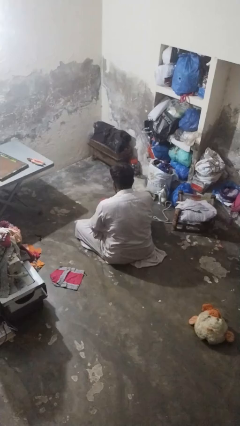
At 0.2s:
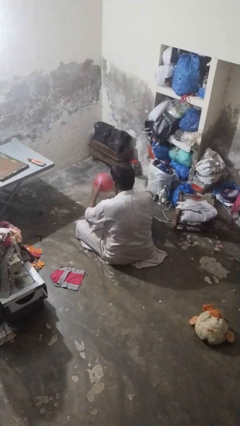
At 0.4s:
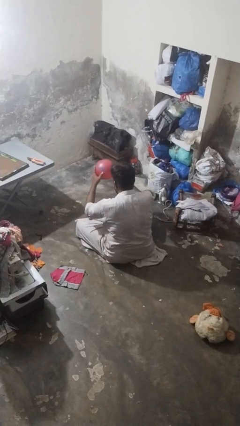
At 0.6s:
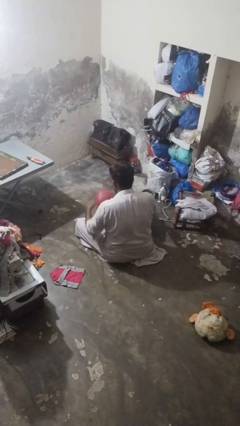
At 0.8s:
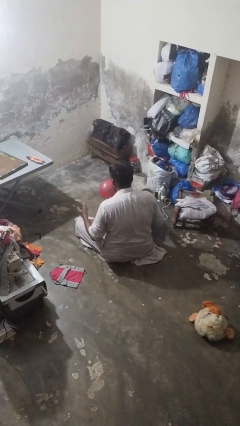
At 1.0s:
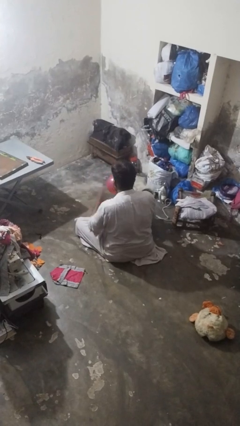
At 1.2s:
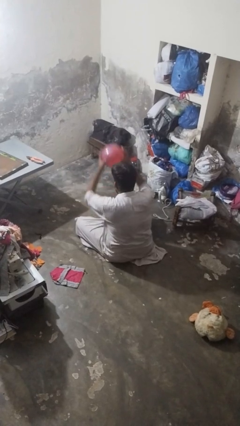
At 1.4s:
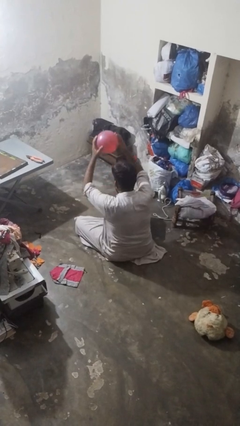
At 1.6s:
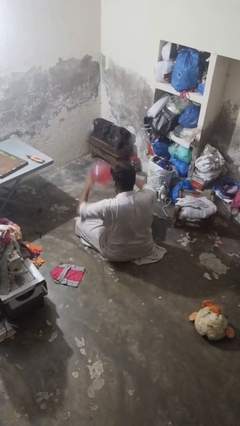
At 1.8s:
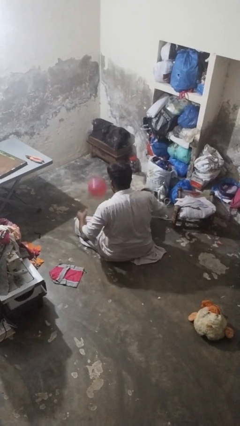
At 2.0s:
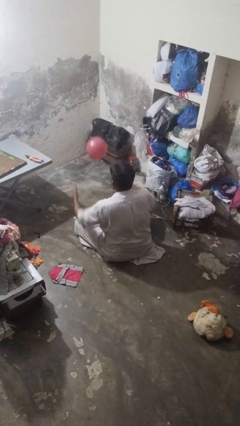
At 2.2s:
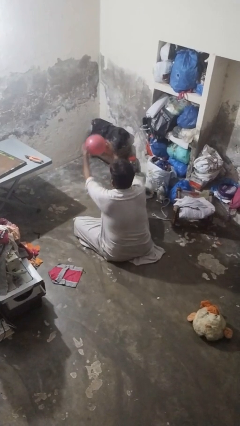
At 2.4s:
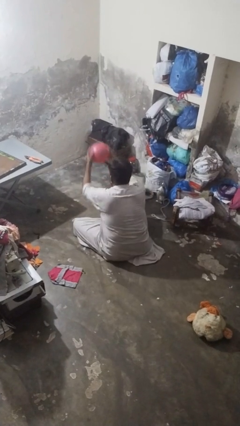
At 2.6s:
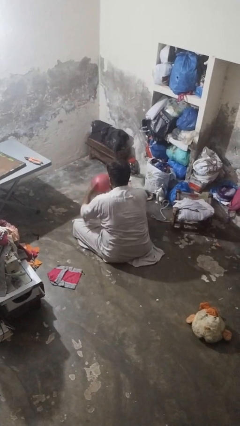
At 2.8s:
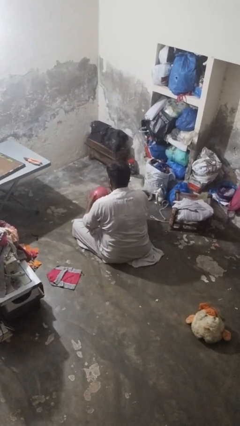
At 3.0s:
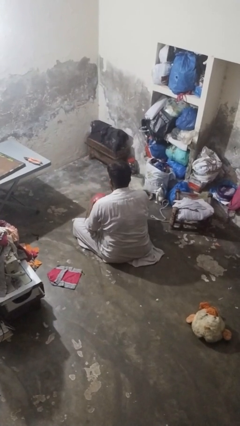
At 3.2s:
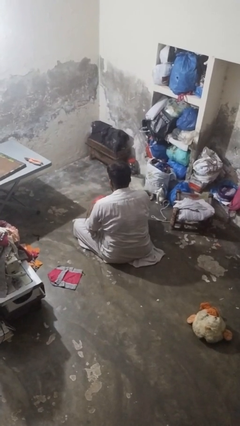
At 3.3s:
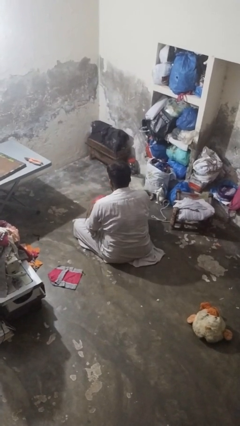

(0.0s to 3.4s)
person bounces ball on floor

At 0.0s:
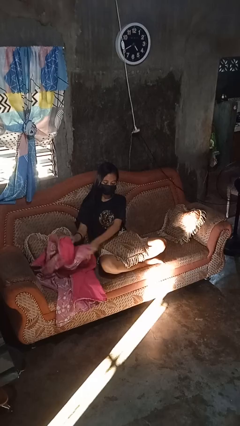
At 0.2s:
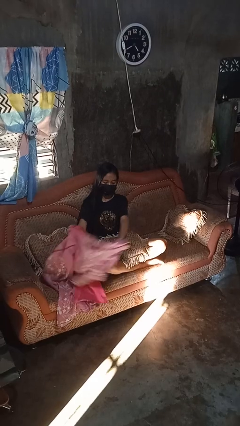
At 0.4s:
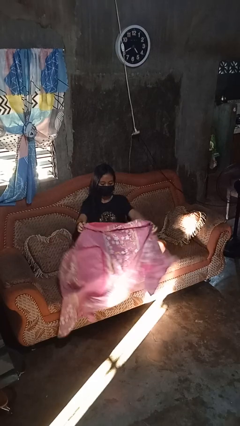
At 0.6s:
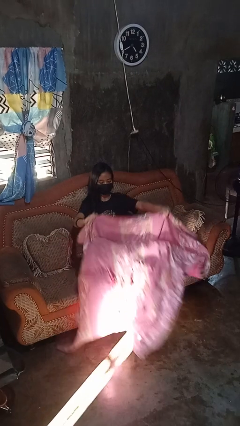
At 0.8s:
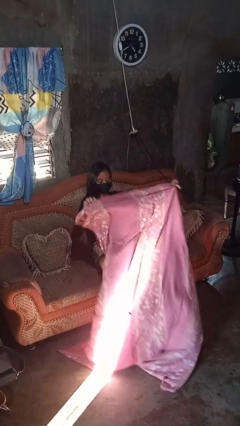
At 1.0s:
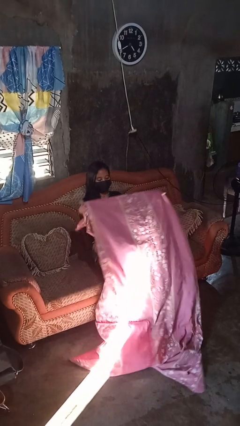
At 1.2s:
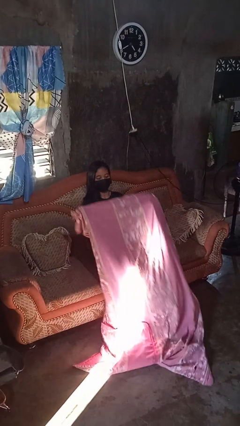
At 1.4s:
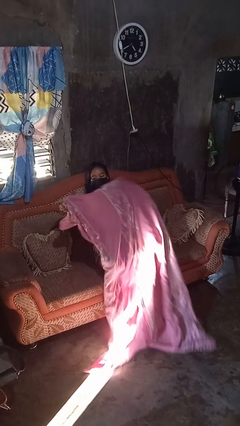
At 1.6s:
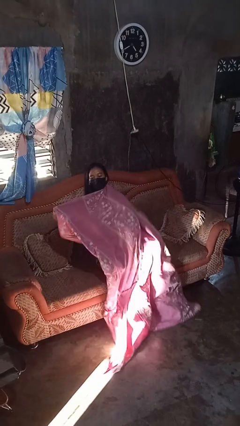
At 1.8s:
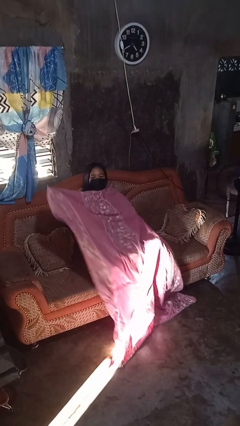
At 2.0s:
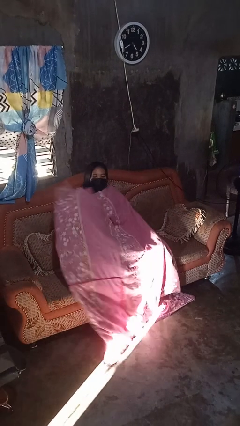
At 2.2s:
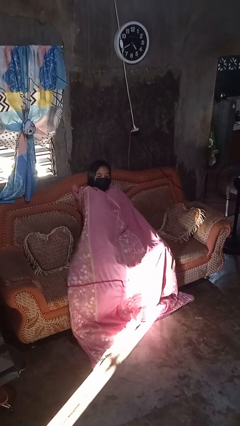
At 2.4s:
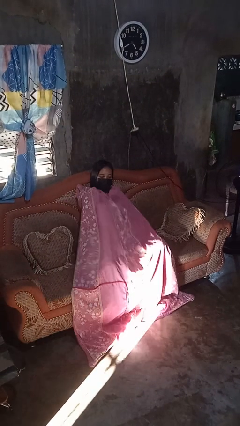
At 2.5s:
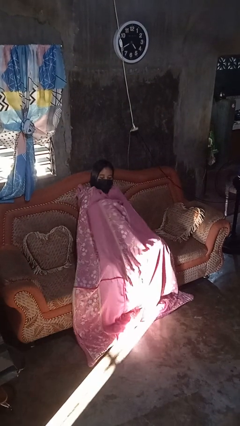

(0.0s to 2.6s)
person covers with blanket

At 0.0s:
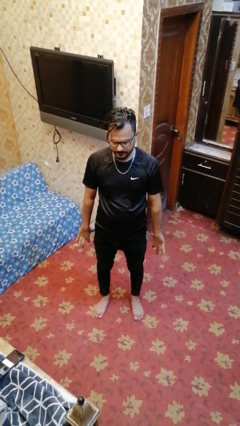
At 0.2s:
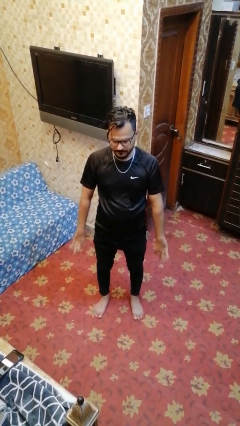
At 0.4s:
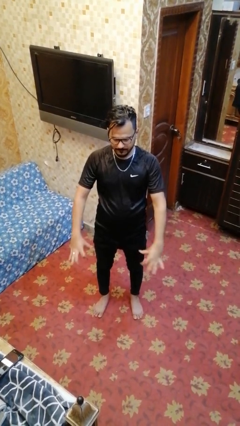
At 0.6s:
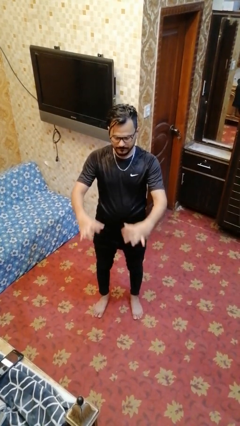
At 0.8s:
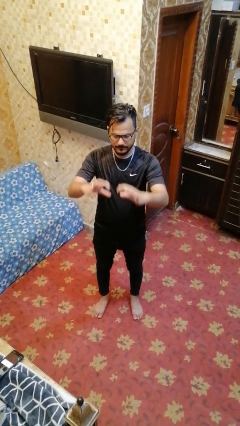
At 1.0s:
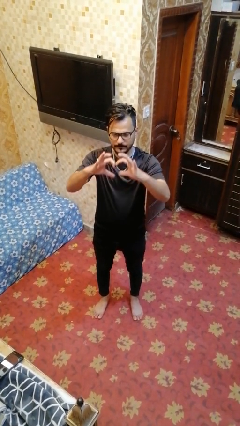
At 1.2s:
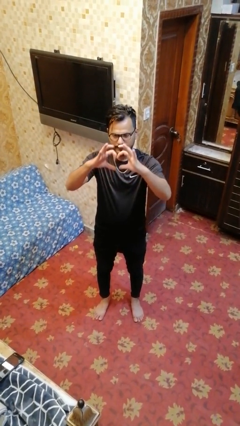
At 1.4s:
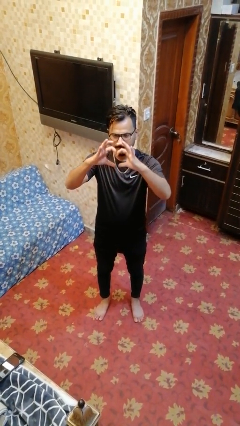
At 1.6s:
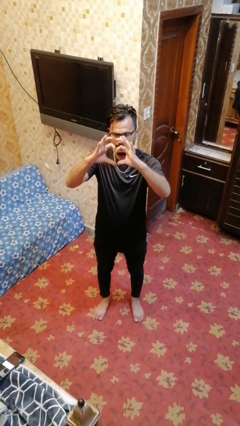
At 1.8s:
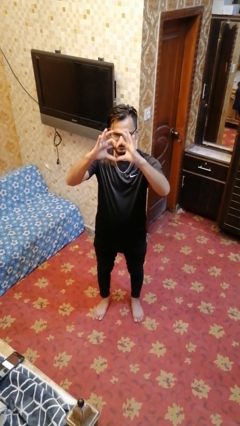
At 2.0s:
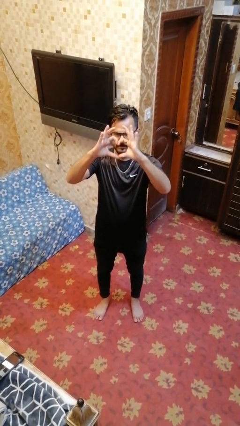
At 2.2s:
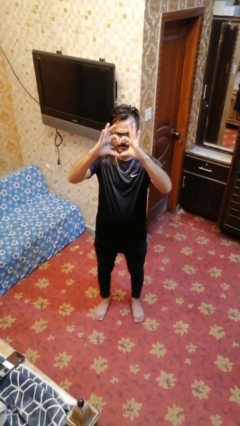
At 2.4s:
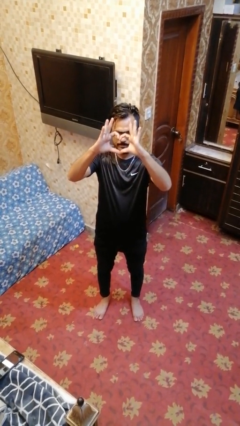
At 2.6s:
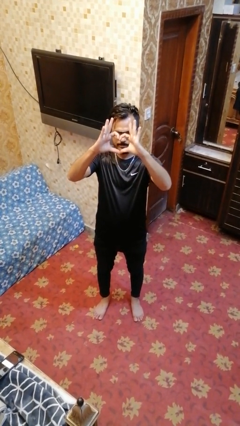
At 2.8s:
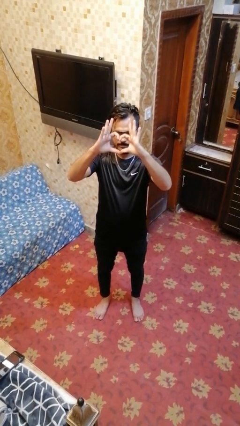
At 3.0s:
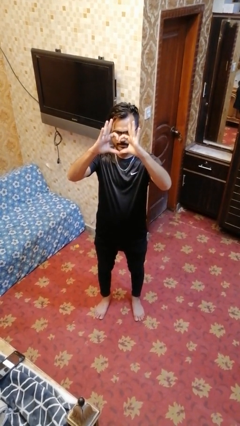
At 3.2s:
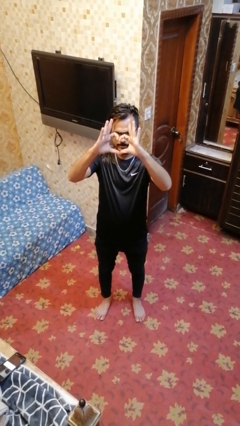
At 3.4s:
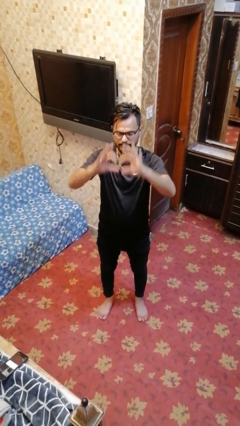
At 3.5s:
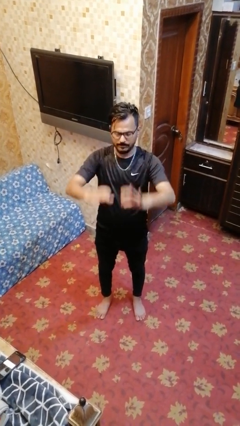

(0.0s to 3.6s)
person gestures heart

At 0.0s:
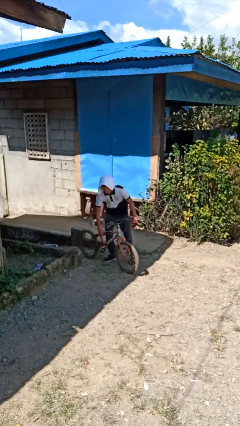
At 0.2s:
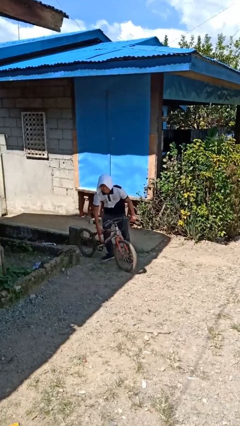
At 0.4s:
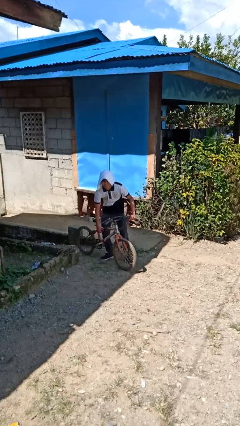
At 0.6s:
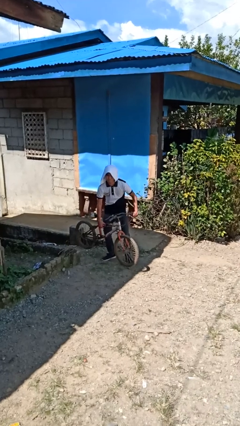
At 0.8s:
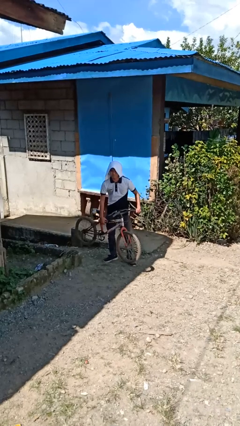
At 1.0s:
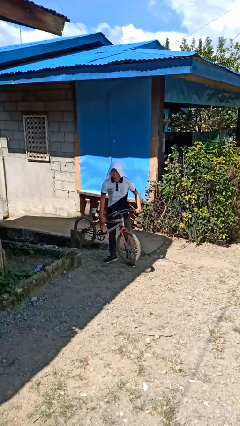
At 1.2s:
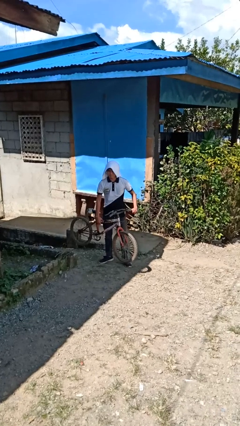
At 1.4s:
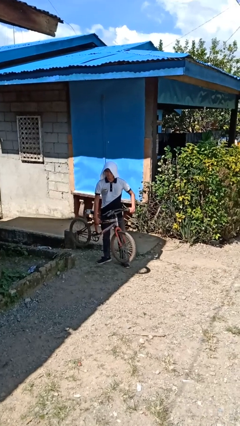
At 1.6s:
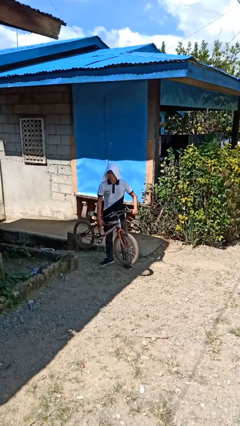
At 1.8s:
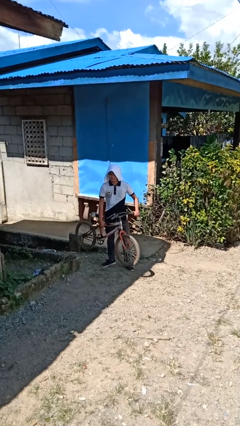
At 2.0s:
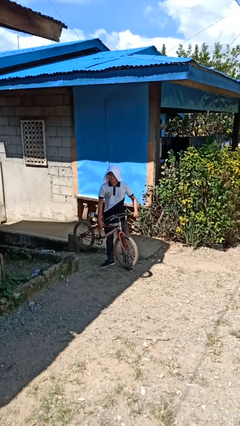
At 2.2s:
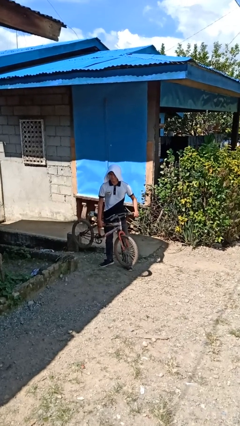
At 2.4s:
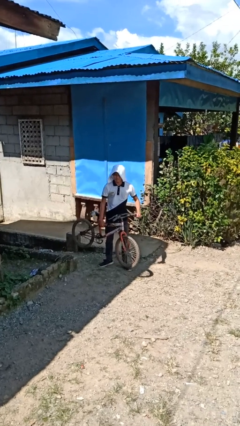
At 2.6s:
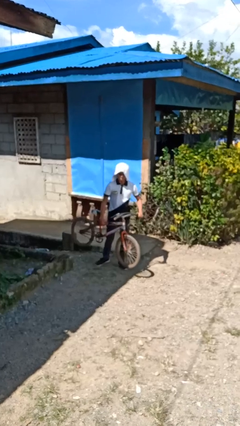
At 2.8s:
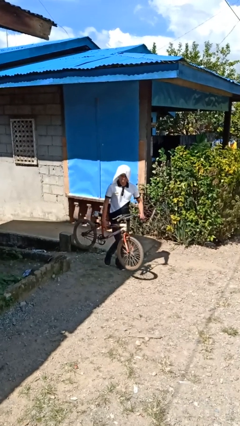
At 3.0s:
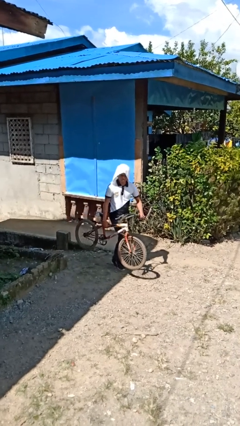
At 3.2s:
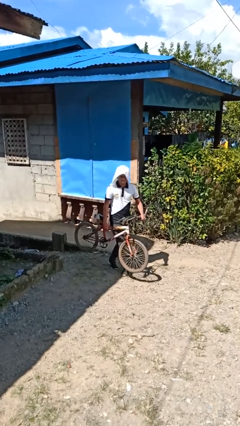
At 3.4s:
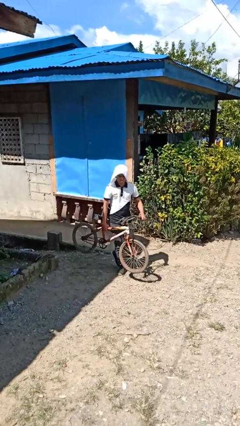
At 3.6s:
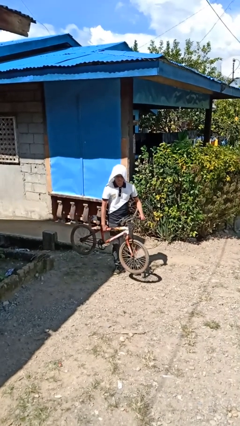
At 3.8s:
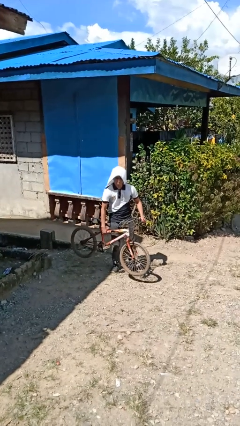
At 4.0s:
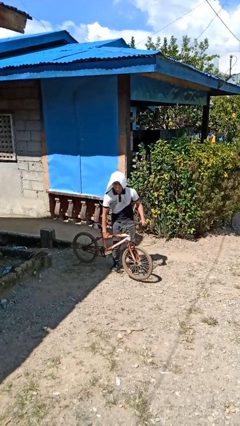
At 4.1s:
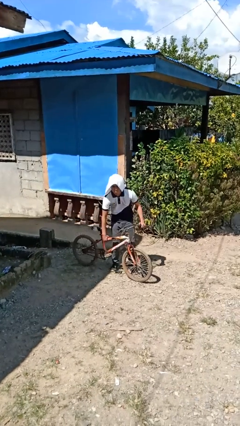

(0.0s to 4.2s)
person carries bicycle

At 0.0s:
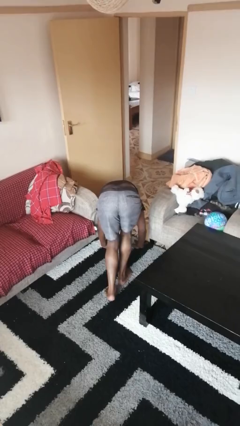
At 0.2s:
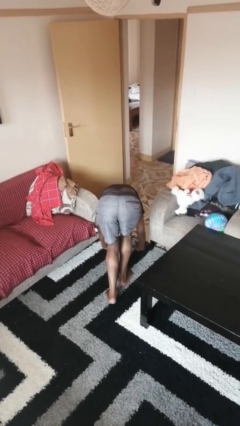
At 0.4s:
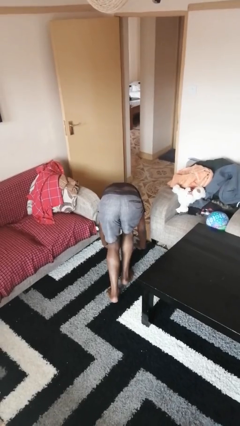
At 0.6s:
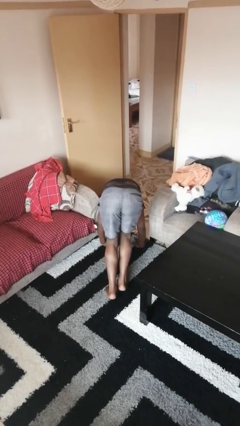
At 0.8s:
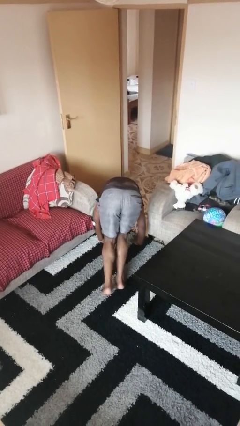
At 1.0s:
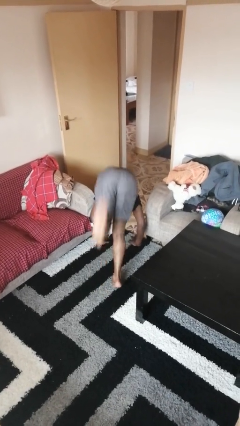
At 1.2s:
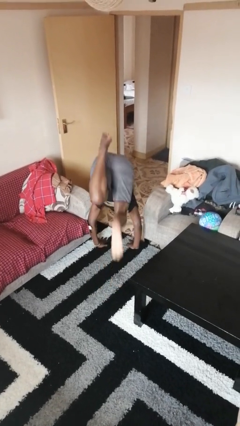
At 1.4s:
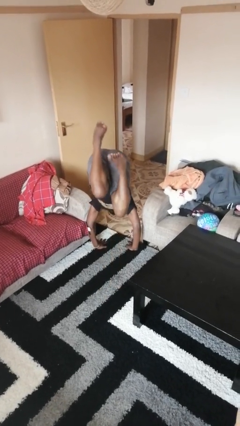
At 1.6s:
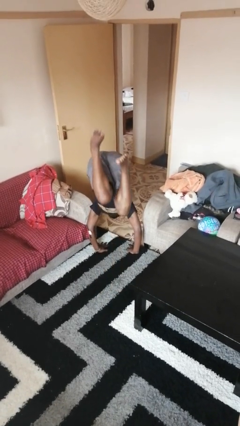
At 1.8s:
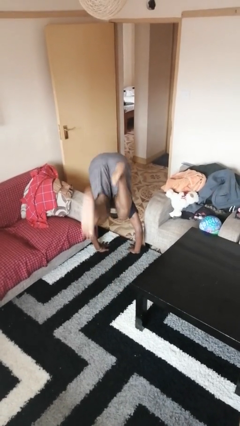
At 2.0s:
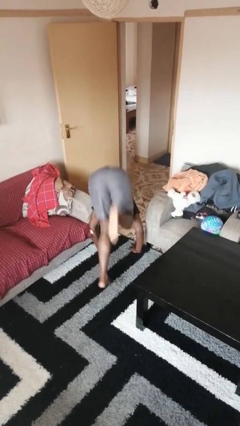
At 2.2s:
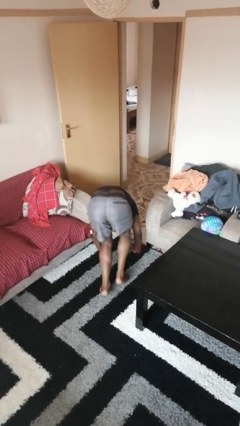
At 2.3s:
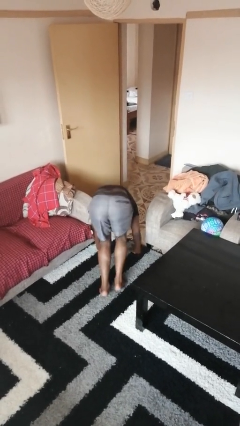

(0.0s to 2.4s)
person handstand

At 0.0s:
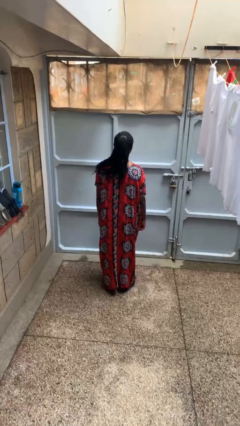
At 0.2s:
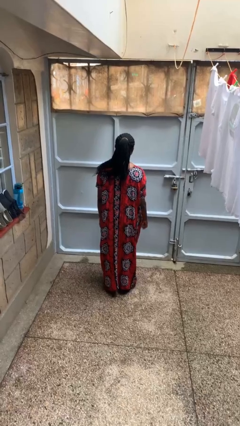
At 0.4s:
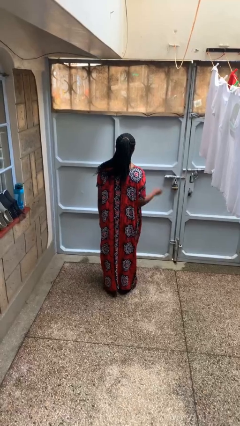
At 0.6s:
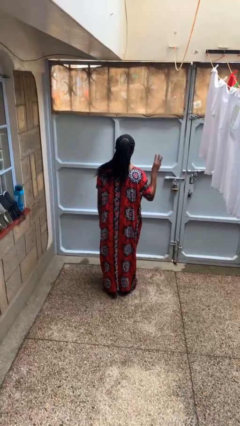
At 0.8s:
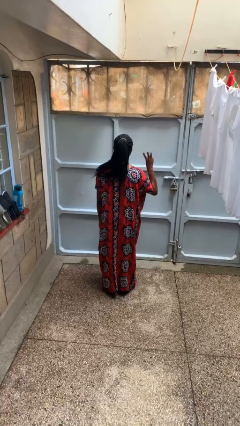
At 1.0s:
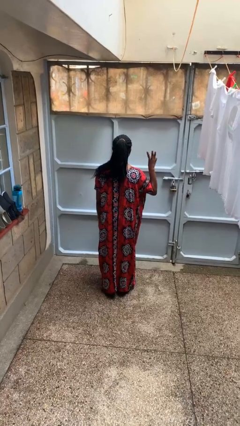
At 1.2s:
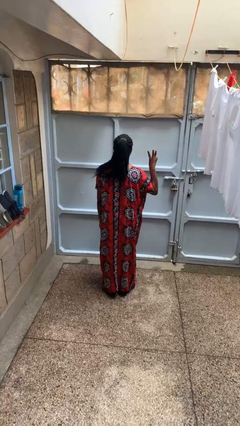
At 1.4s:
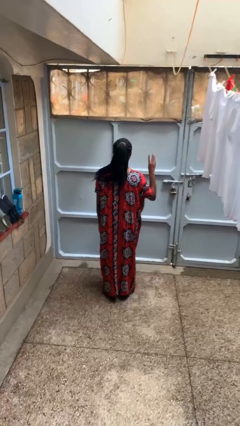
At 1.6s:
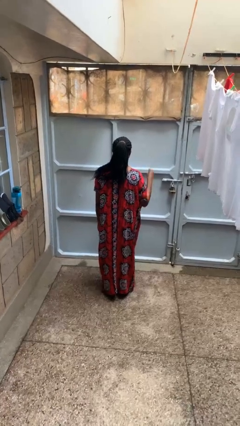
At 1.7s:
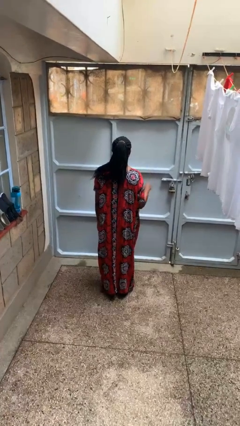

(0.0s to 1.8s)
person gestures number three
